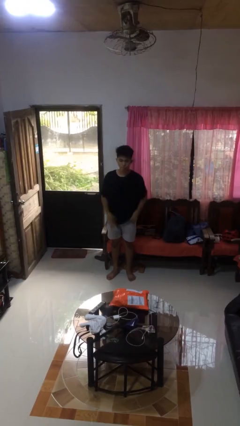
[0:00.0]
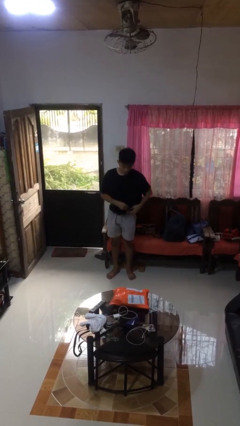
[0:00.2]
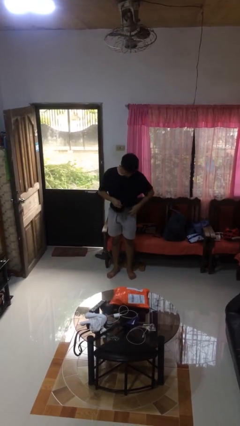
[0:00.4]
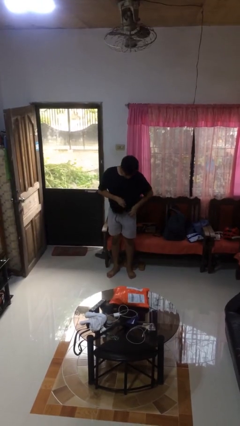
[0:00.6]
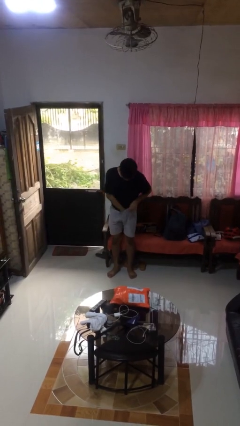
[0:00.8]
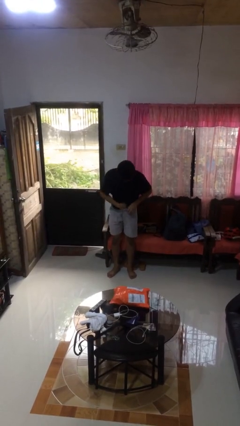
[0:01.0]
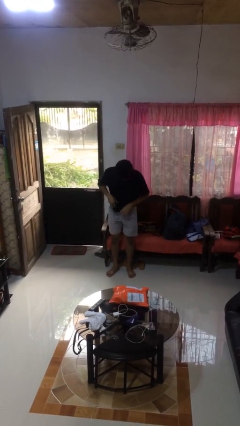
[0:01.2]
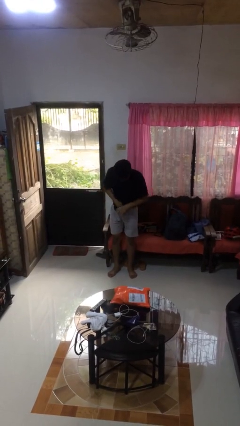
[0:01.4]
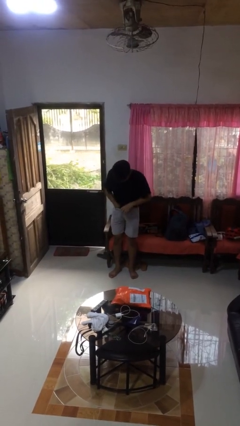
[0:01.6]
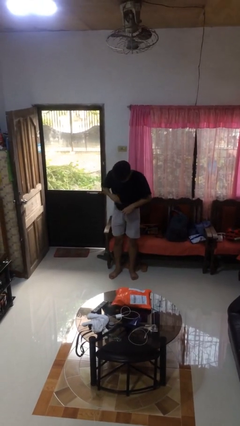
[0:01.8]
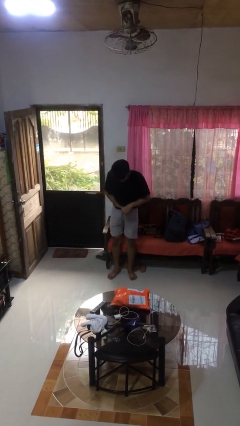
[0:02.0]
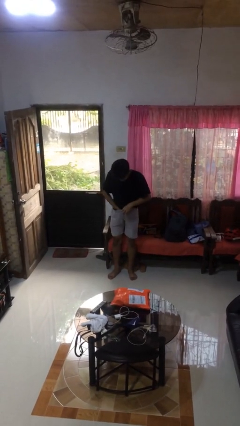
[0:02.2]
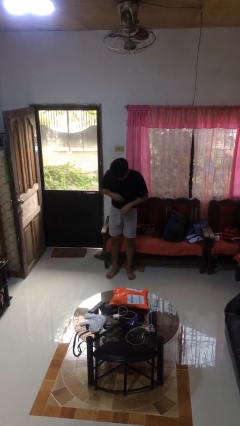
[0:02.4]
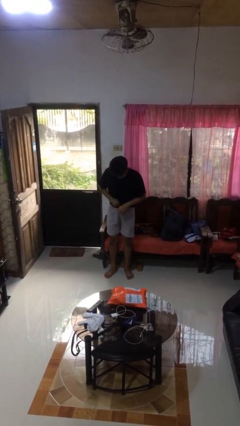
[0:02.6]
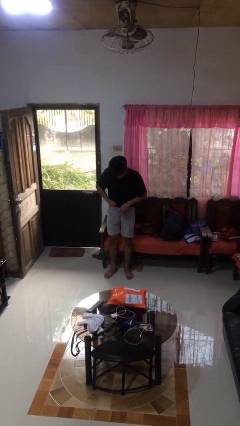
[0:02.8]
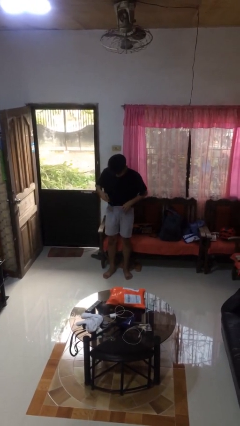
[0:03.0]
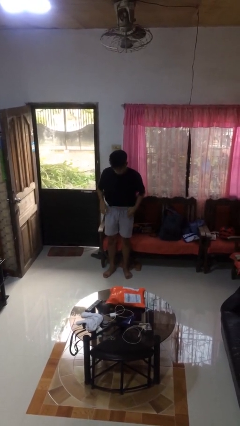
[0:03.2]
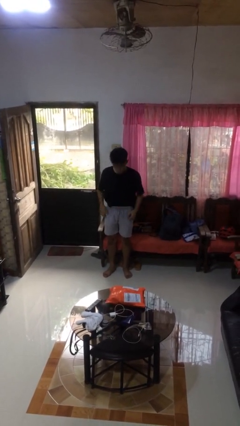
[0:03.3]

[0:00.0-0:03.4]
person tucks in shirt

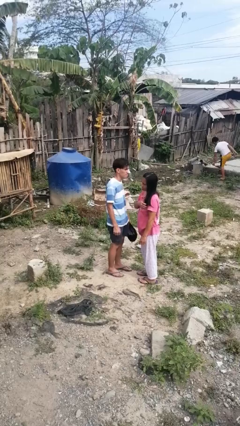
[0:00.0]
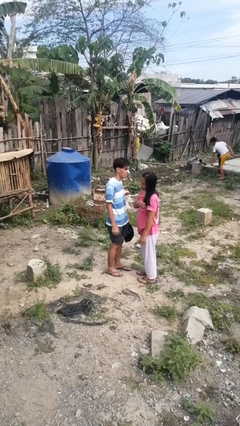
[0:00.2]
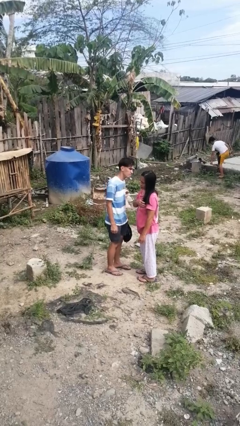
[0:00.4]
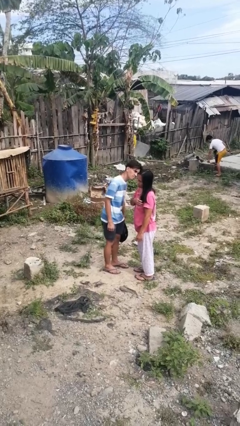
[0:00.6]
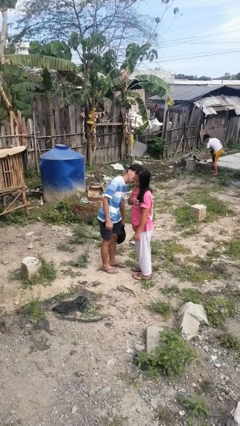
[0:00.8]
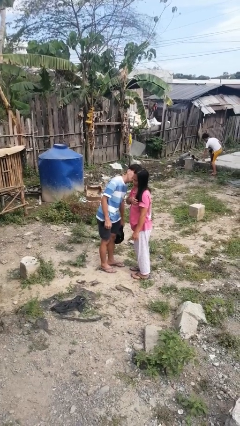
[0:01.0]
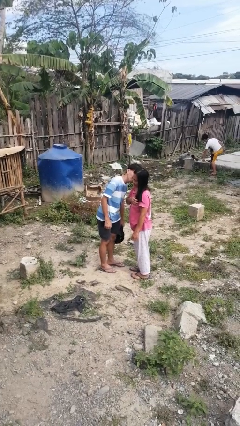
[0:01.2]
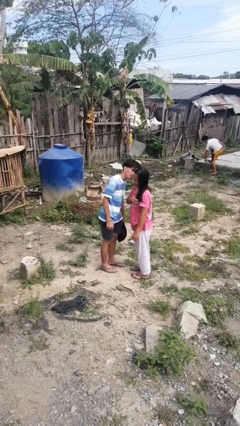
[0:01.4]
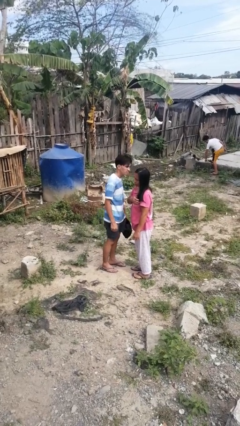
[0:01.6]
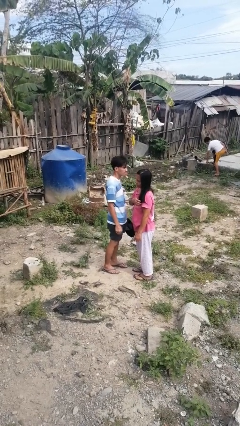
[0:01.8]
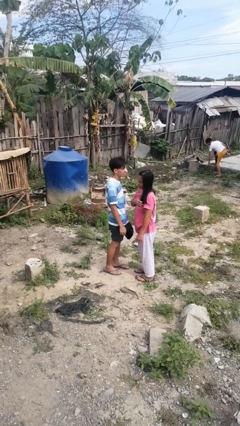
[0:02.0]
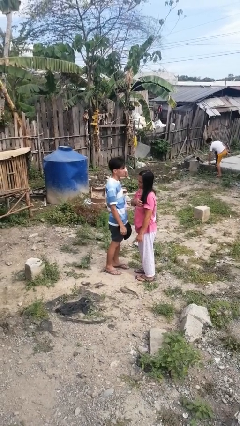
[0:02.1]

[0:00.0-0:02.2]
person kisses cheek of person

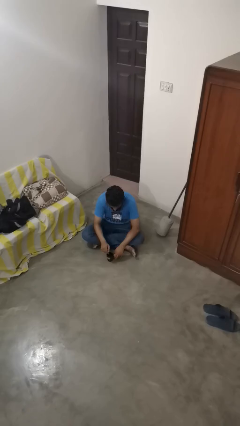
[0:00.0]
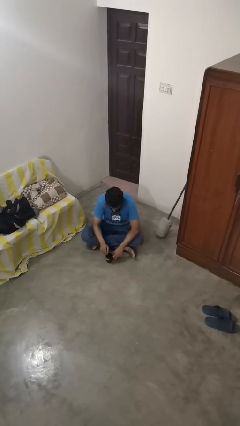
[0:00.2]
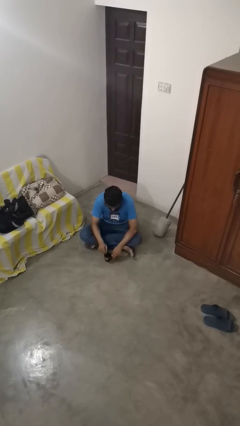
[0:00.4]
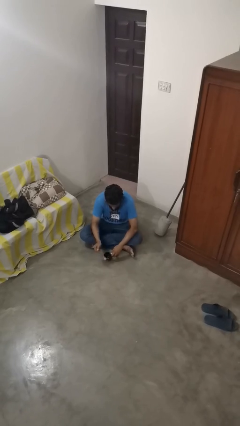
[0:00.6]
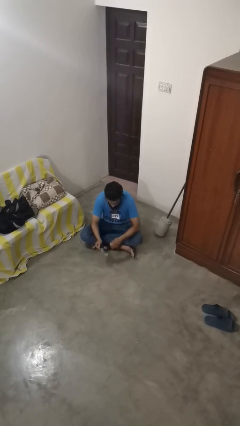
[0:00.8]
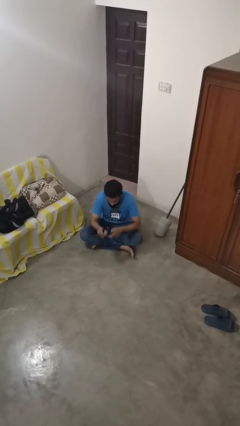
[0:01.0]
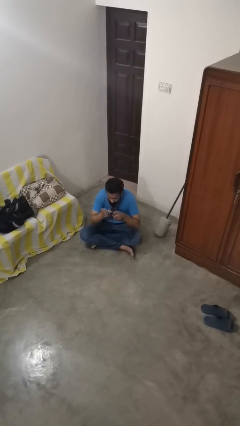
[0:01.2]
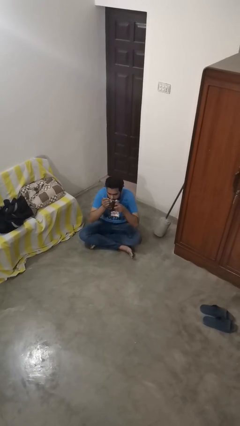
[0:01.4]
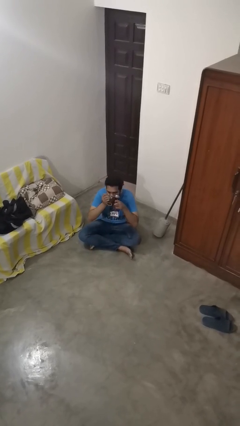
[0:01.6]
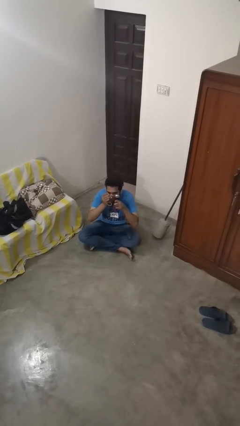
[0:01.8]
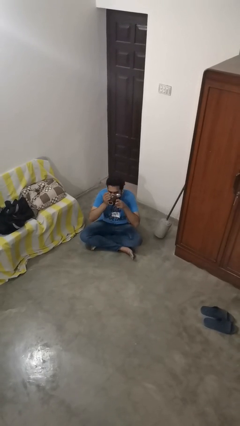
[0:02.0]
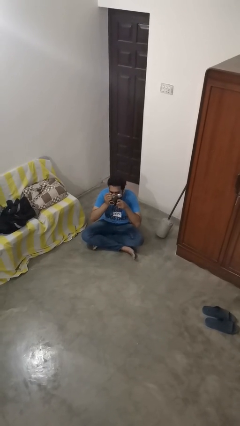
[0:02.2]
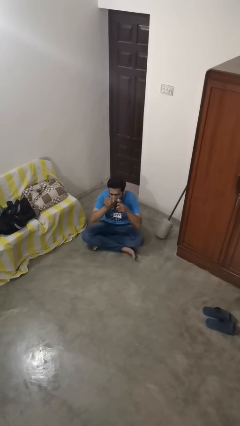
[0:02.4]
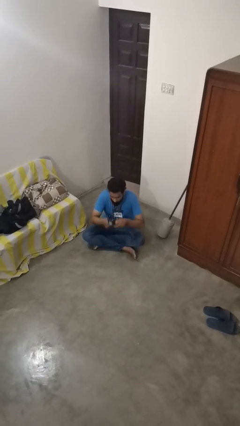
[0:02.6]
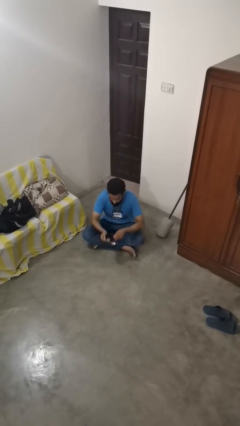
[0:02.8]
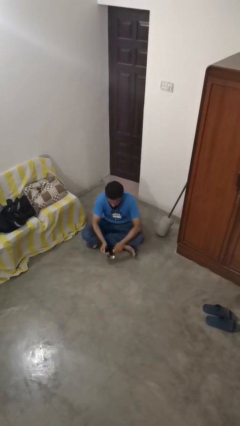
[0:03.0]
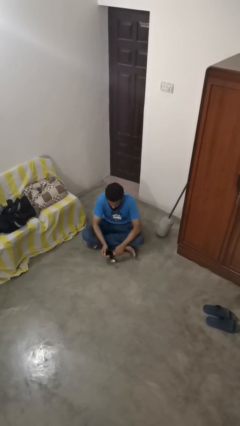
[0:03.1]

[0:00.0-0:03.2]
person drinks from mug

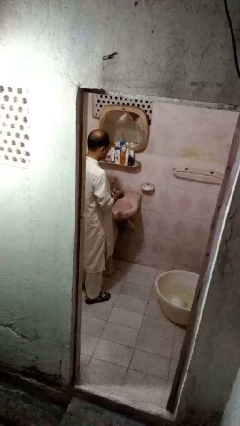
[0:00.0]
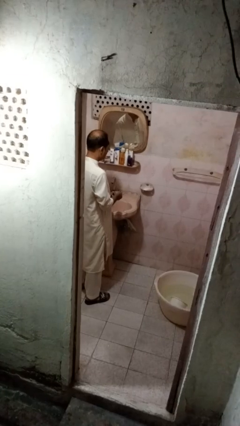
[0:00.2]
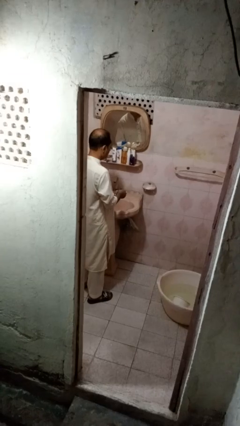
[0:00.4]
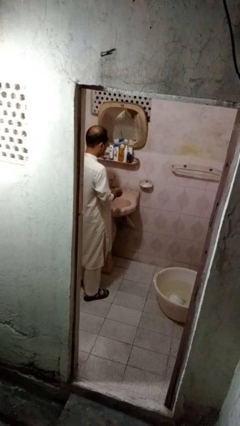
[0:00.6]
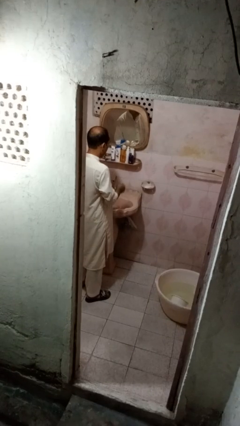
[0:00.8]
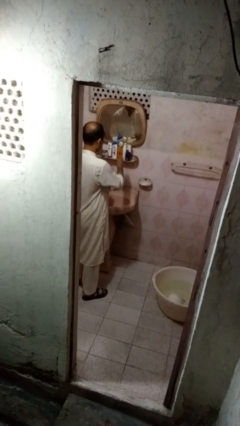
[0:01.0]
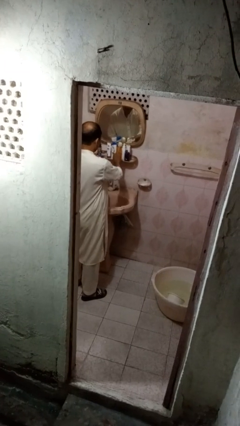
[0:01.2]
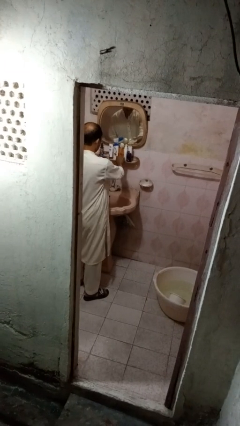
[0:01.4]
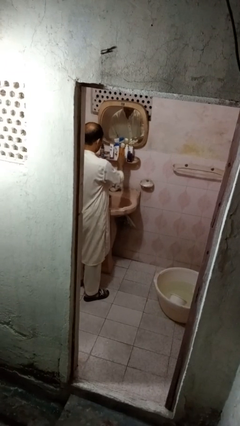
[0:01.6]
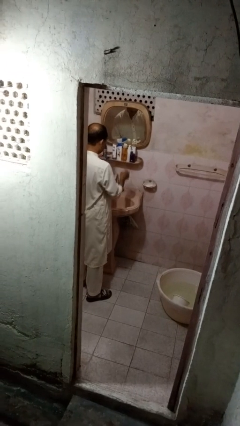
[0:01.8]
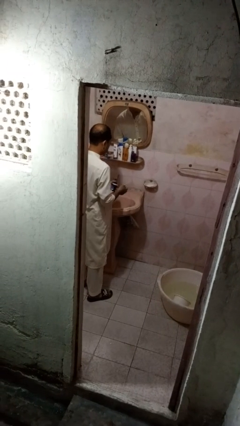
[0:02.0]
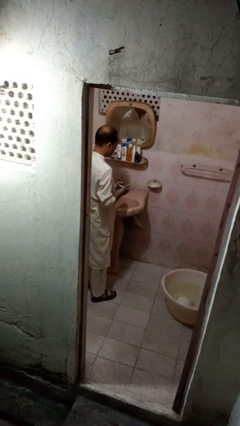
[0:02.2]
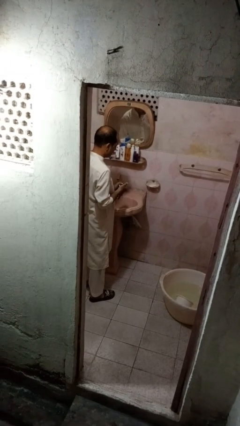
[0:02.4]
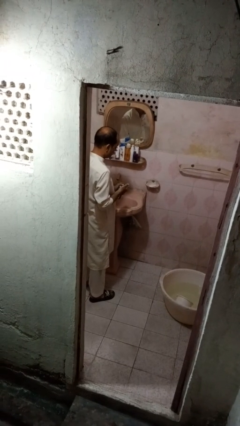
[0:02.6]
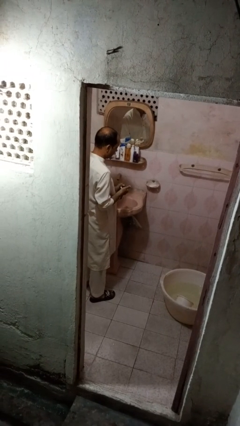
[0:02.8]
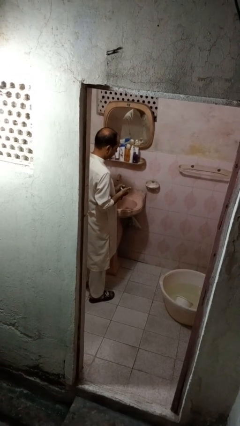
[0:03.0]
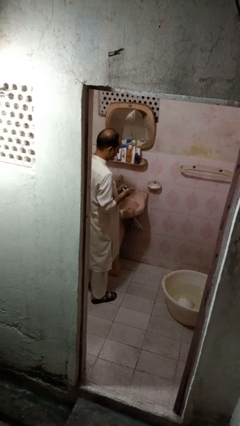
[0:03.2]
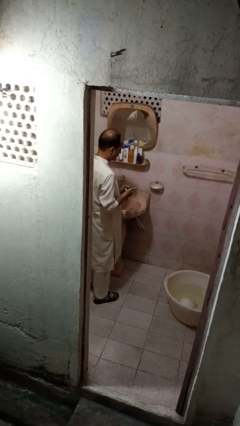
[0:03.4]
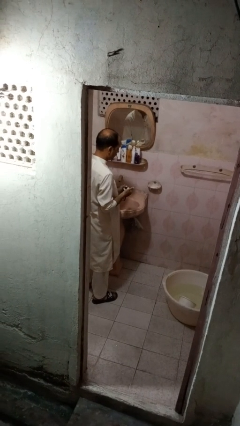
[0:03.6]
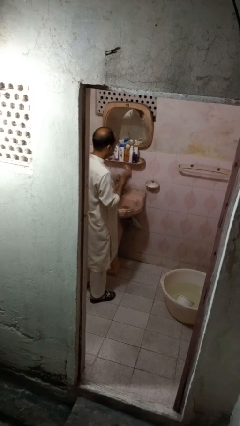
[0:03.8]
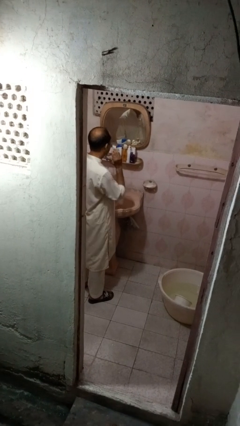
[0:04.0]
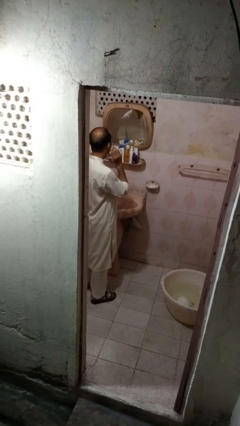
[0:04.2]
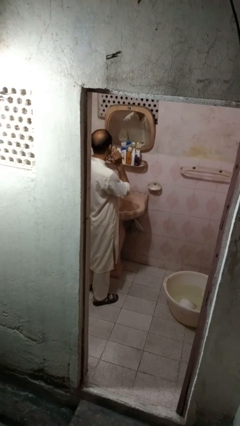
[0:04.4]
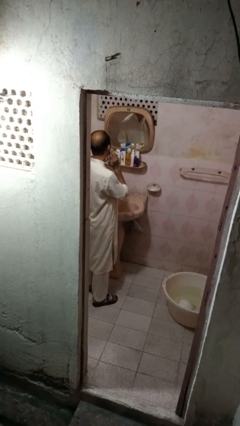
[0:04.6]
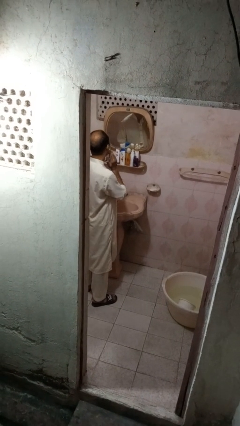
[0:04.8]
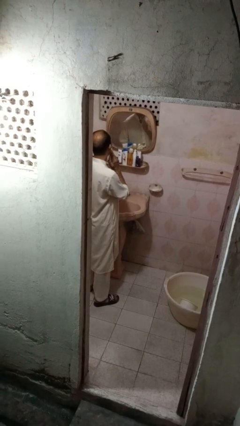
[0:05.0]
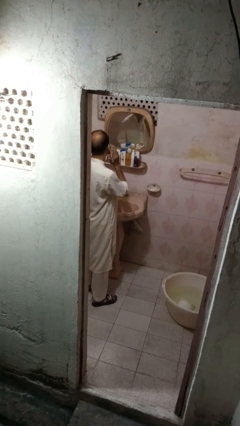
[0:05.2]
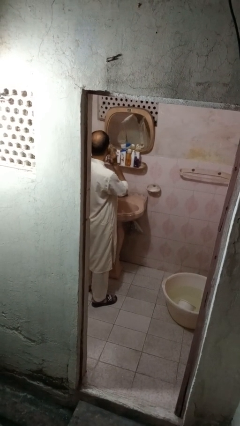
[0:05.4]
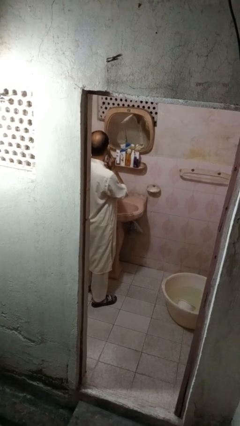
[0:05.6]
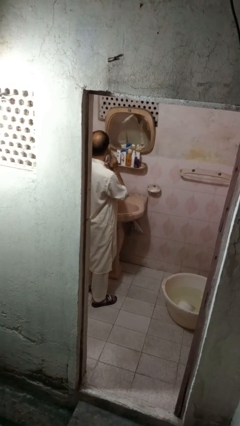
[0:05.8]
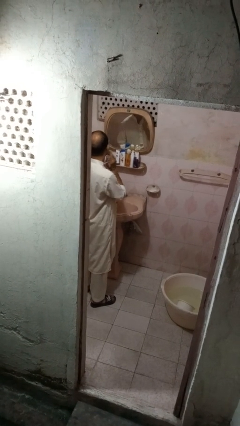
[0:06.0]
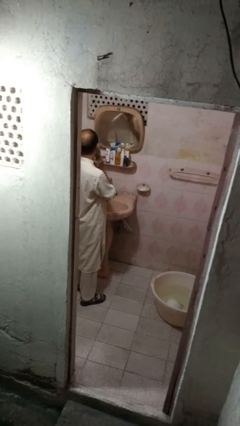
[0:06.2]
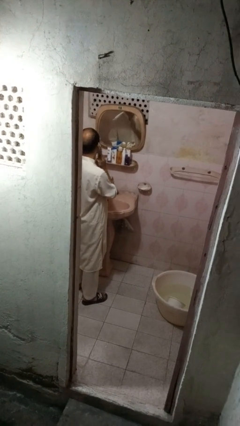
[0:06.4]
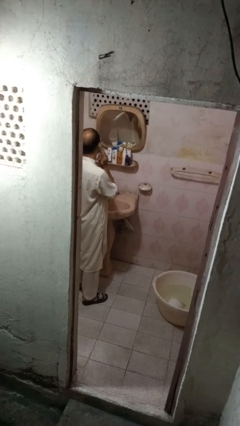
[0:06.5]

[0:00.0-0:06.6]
person applies shaving cream

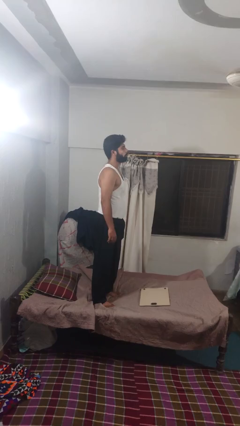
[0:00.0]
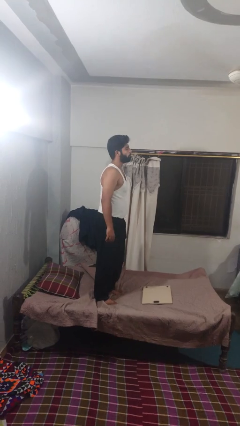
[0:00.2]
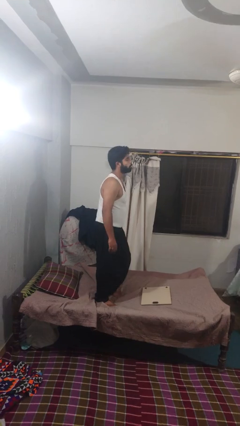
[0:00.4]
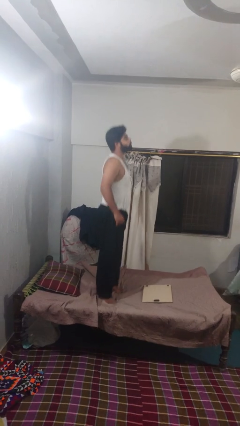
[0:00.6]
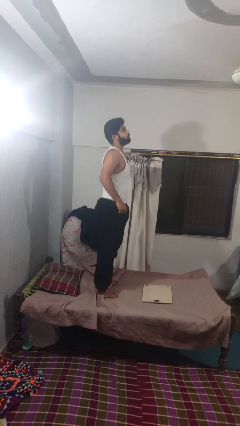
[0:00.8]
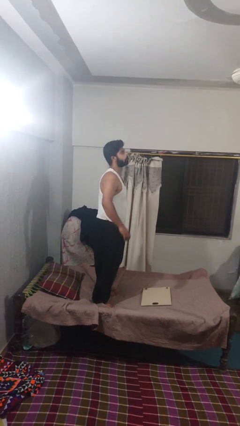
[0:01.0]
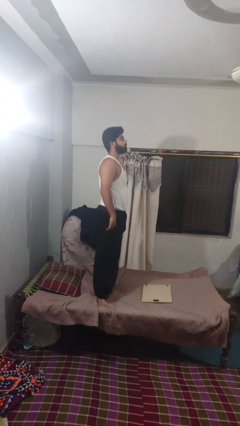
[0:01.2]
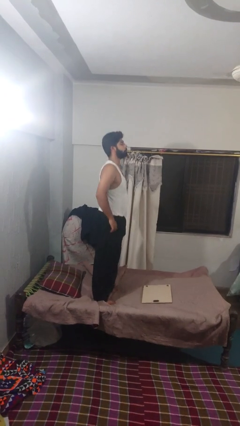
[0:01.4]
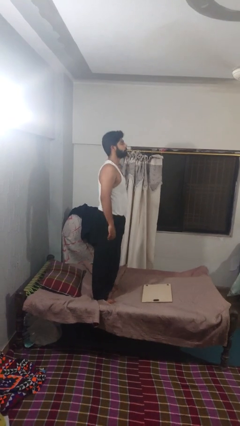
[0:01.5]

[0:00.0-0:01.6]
person jumps on bed

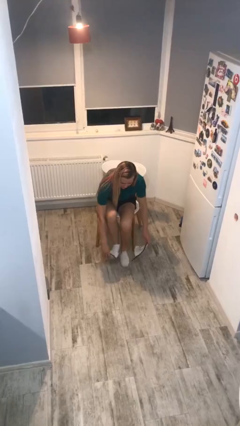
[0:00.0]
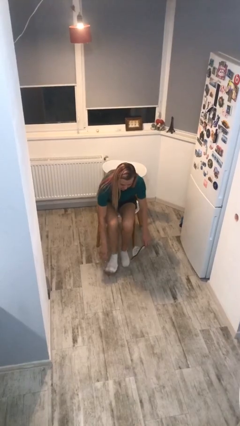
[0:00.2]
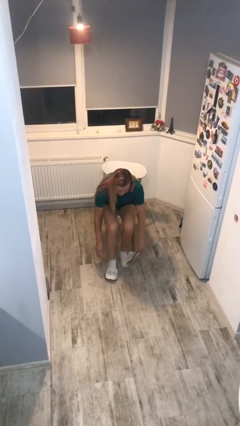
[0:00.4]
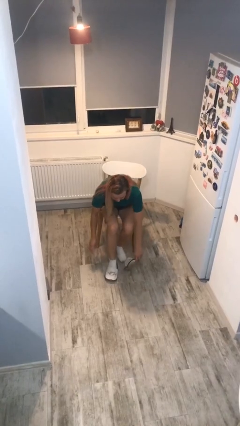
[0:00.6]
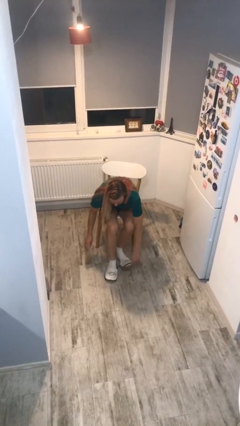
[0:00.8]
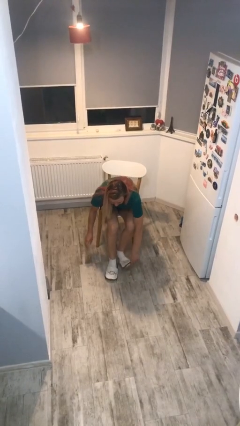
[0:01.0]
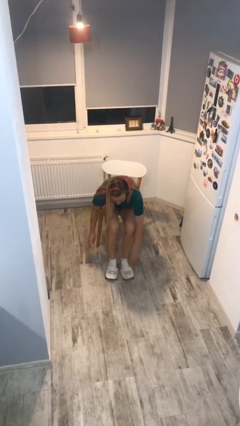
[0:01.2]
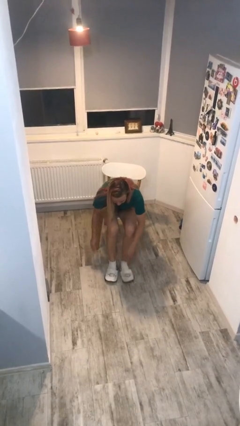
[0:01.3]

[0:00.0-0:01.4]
person puts on shoes
